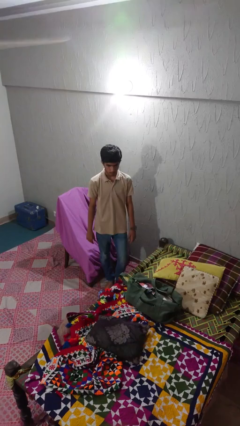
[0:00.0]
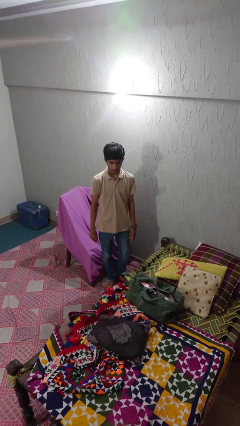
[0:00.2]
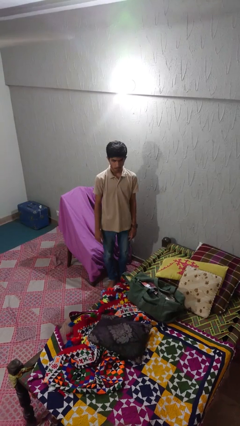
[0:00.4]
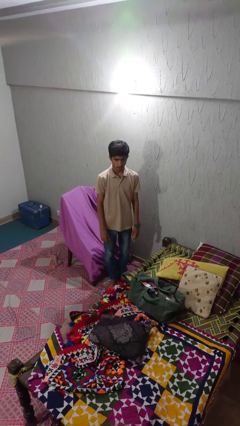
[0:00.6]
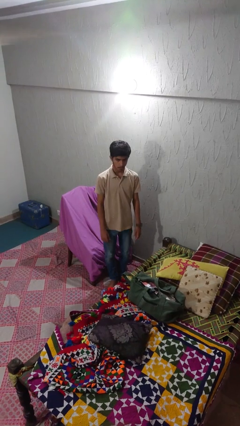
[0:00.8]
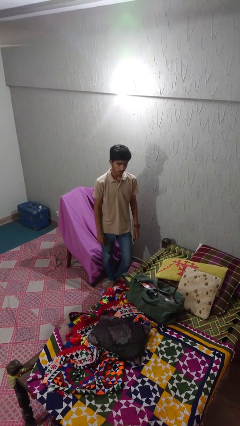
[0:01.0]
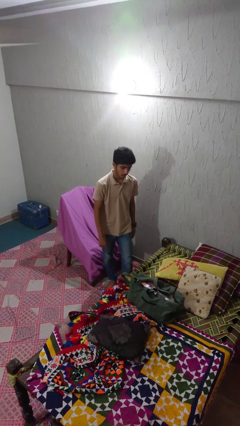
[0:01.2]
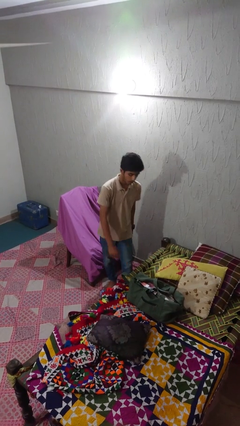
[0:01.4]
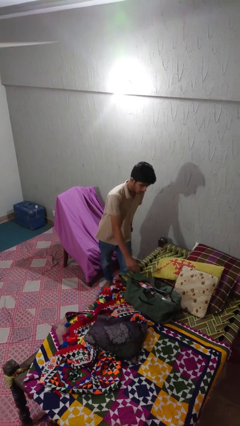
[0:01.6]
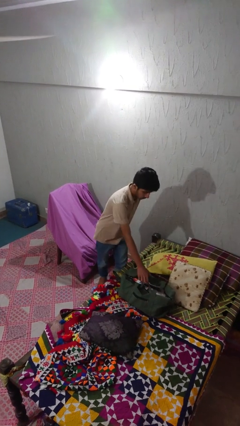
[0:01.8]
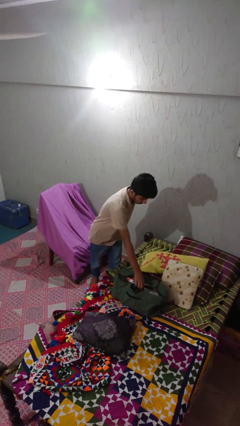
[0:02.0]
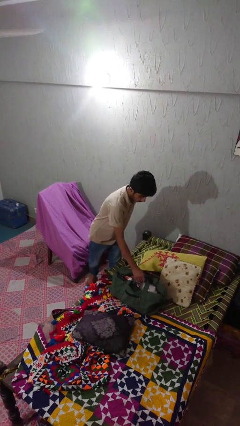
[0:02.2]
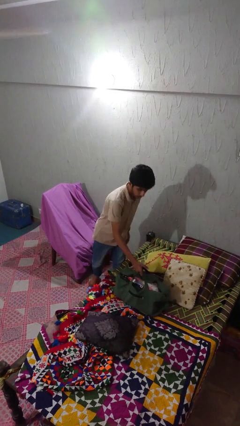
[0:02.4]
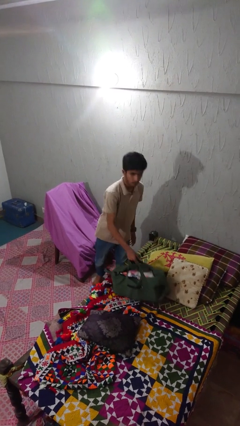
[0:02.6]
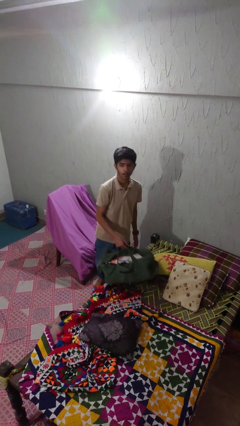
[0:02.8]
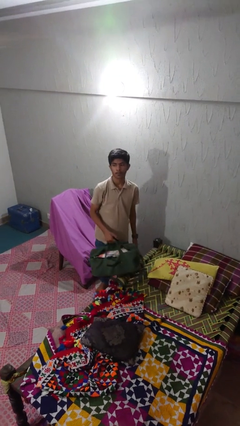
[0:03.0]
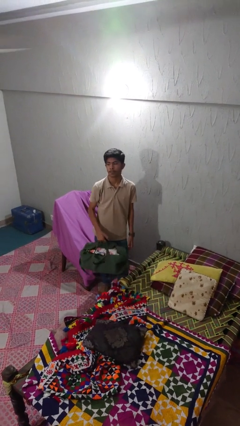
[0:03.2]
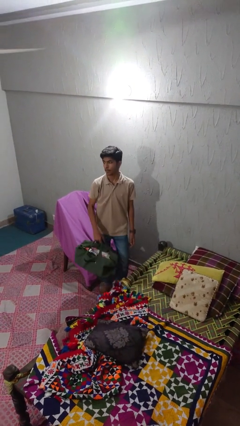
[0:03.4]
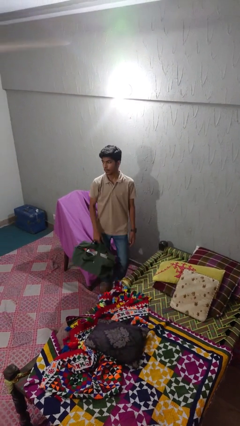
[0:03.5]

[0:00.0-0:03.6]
person picks up object from bed

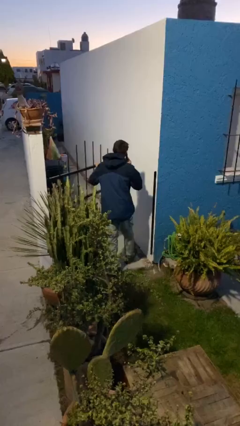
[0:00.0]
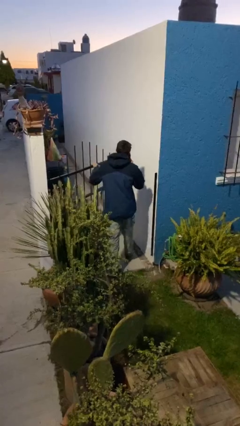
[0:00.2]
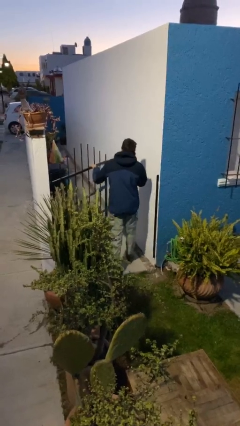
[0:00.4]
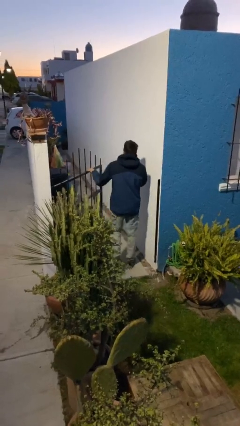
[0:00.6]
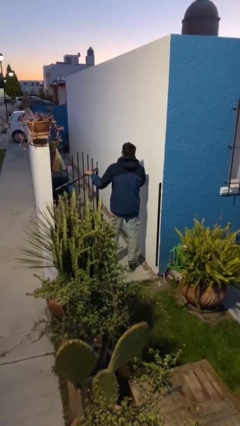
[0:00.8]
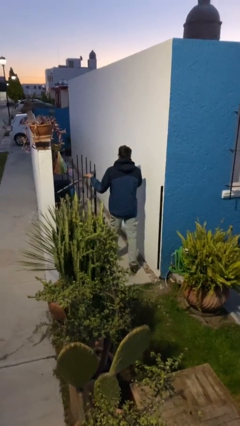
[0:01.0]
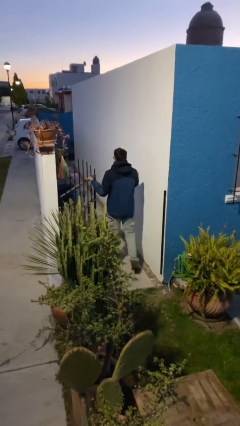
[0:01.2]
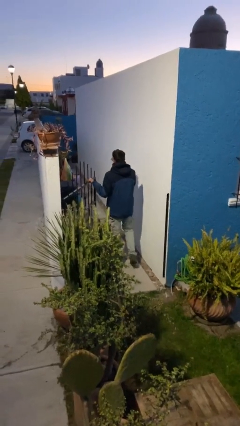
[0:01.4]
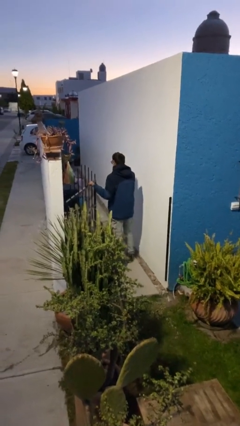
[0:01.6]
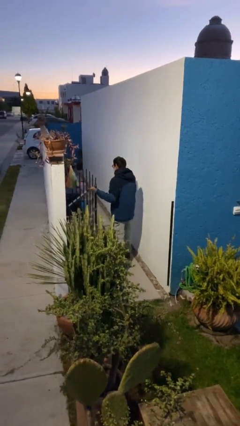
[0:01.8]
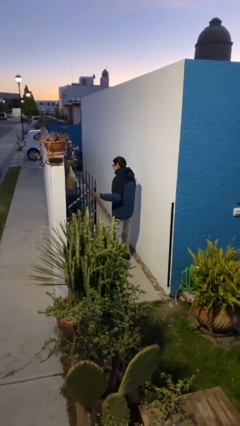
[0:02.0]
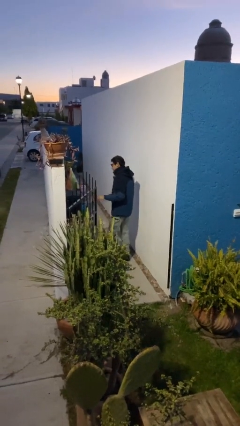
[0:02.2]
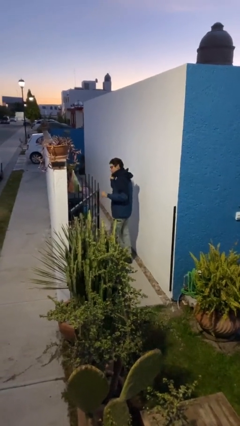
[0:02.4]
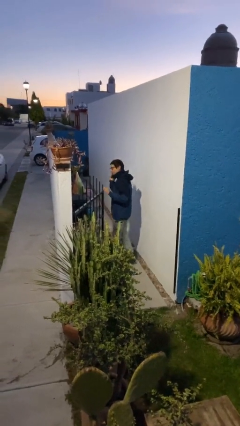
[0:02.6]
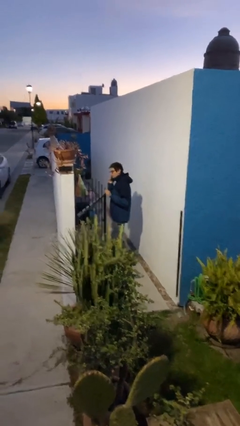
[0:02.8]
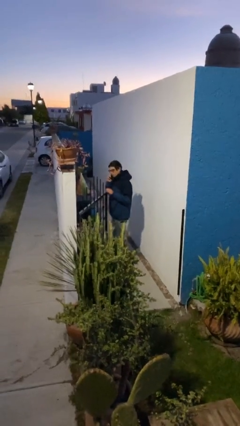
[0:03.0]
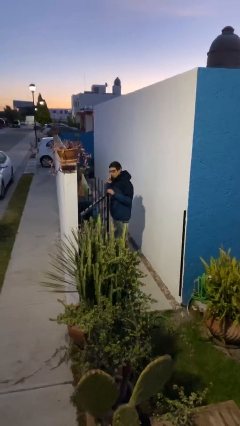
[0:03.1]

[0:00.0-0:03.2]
person exits scene through structure

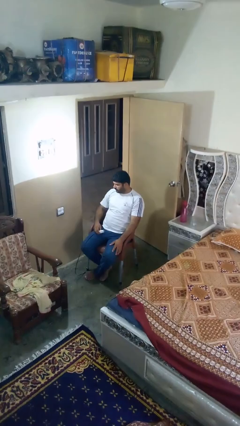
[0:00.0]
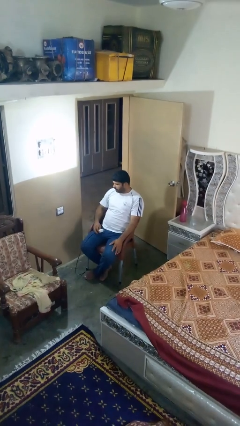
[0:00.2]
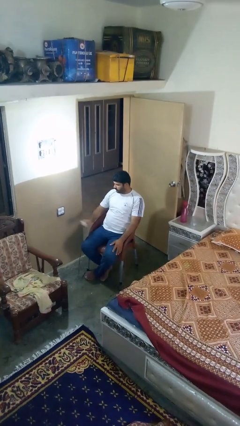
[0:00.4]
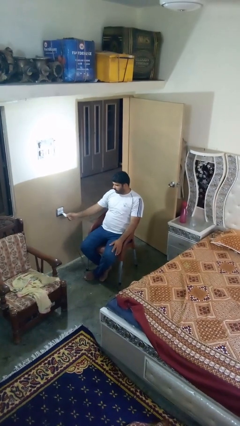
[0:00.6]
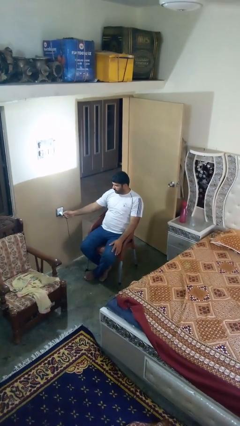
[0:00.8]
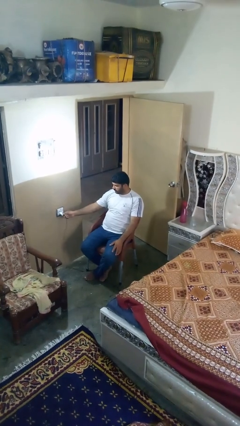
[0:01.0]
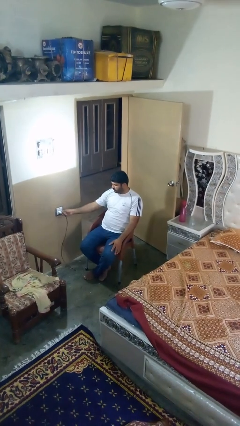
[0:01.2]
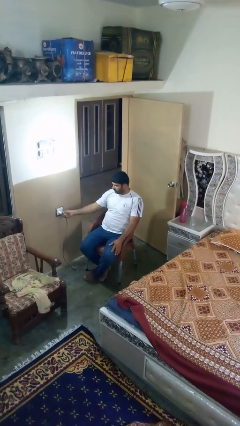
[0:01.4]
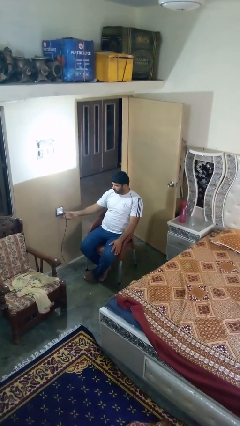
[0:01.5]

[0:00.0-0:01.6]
person plugs into electrical socket

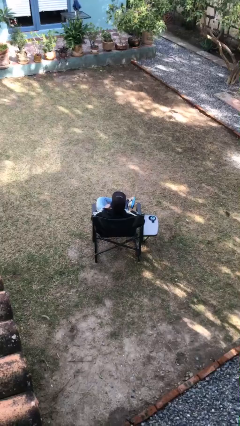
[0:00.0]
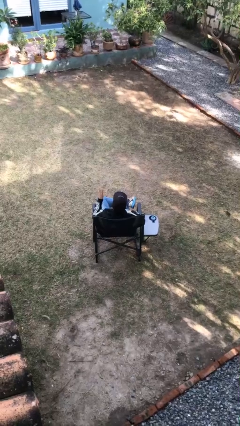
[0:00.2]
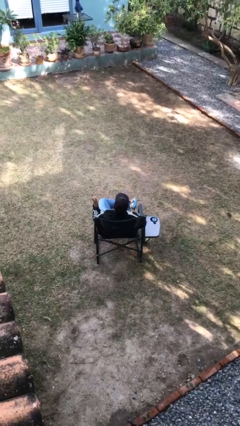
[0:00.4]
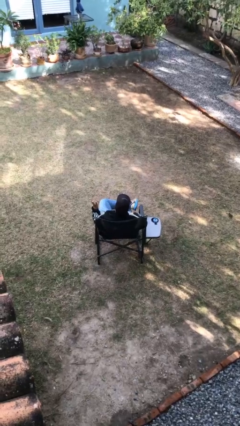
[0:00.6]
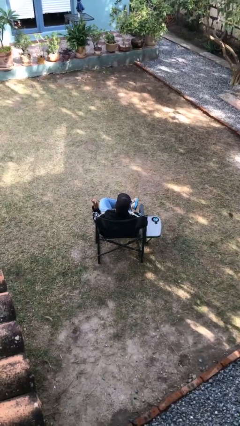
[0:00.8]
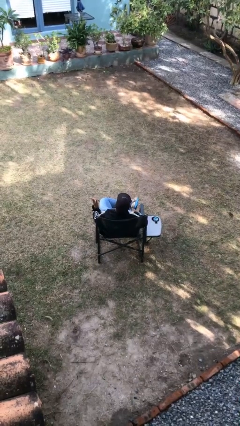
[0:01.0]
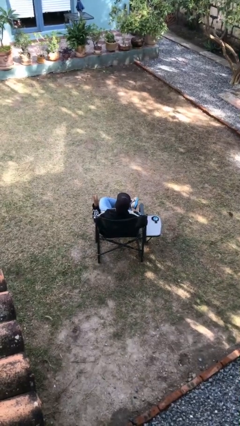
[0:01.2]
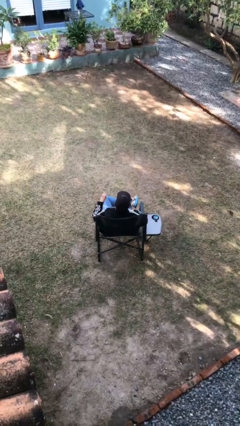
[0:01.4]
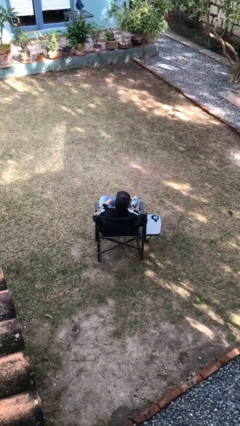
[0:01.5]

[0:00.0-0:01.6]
person gestures number three

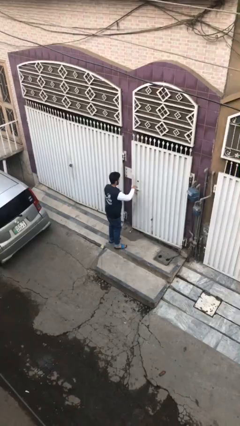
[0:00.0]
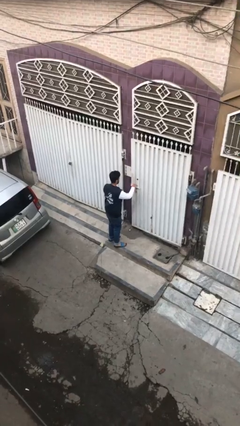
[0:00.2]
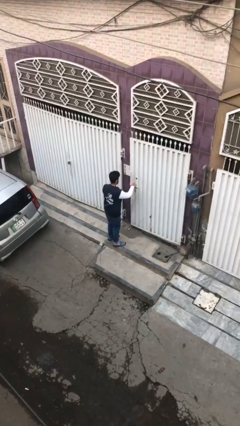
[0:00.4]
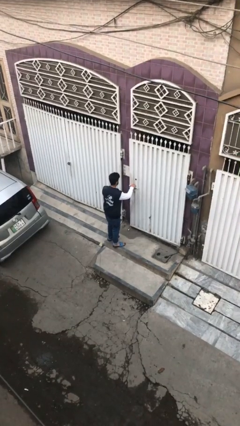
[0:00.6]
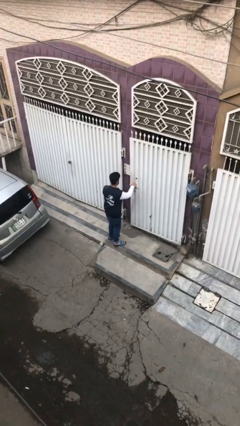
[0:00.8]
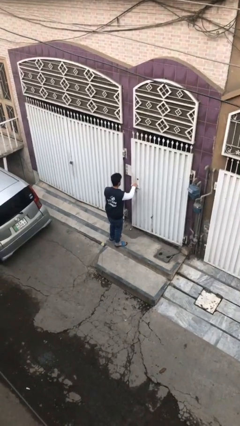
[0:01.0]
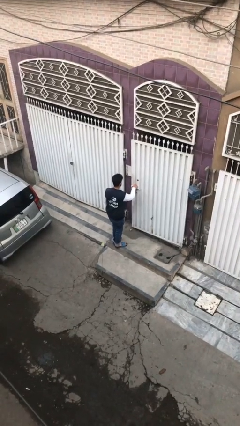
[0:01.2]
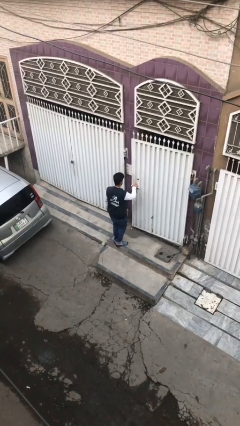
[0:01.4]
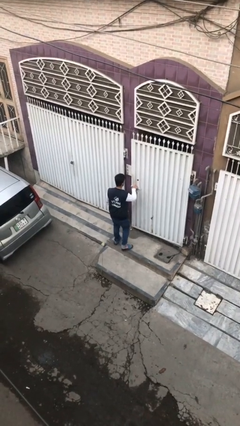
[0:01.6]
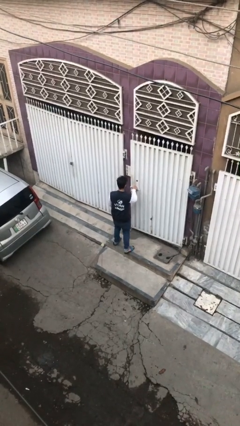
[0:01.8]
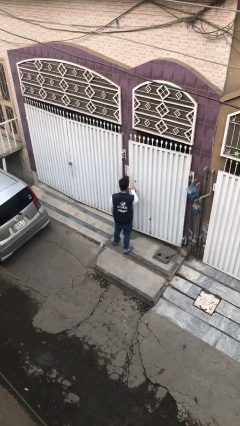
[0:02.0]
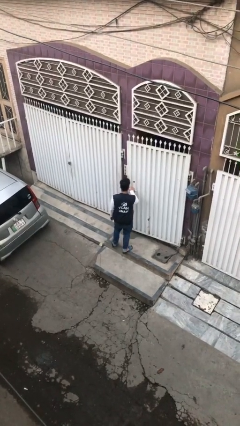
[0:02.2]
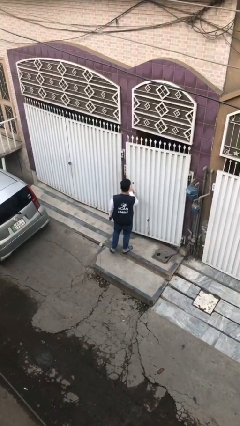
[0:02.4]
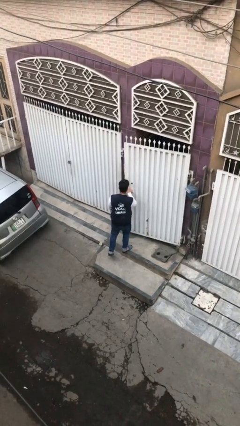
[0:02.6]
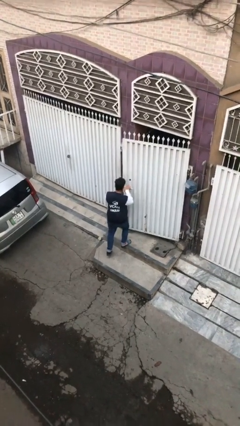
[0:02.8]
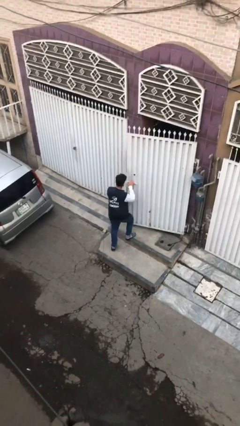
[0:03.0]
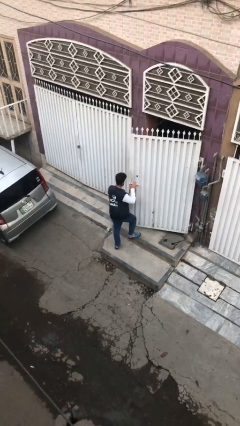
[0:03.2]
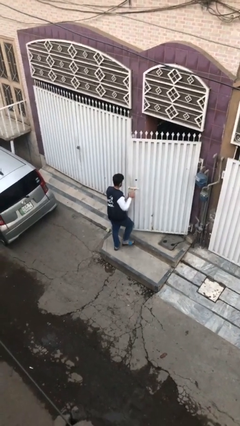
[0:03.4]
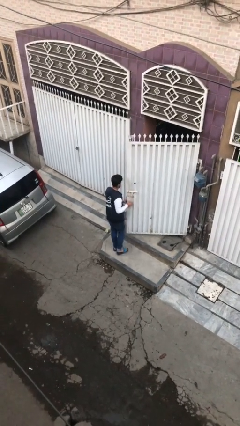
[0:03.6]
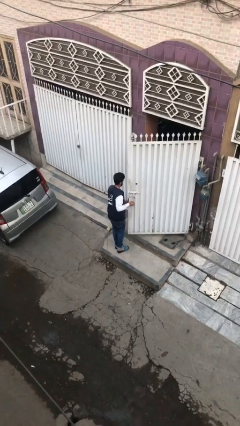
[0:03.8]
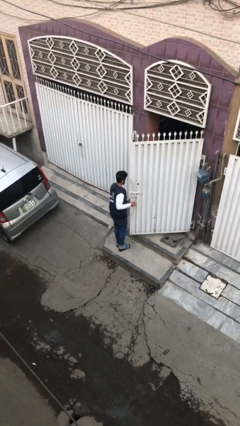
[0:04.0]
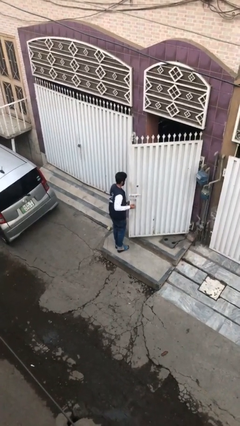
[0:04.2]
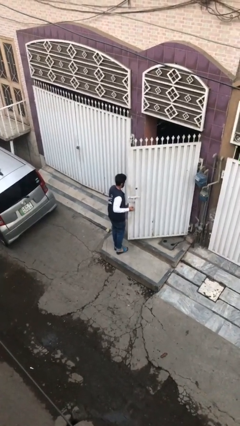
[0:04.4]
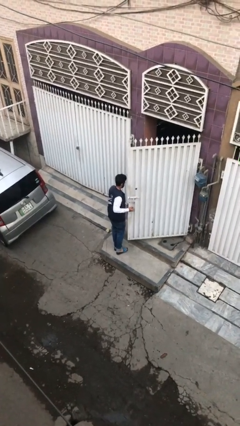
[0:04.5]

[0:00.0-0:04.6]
person opens facility door

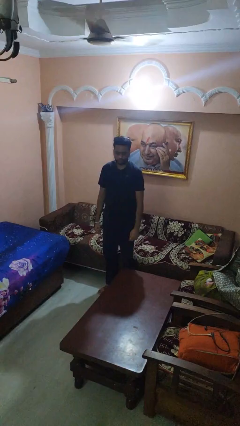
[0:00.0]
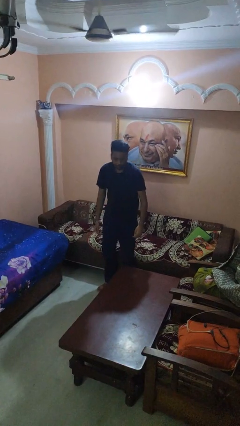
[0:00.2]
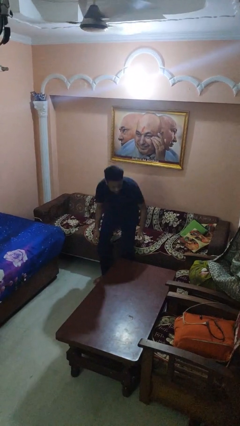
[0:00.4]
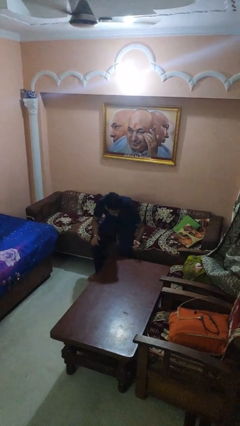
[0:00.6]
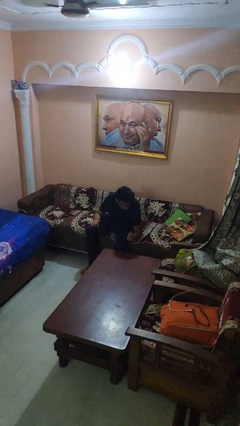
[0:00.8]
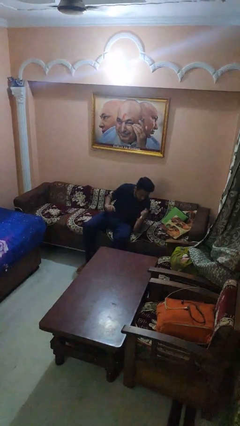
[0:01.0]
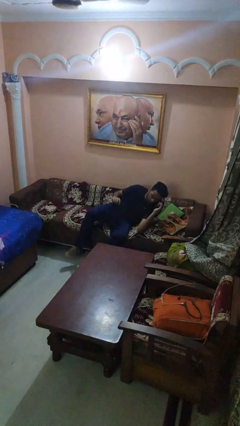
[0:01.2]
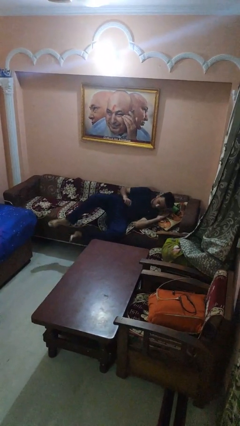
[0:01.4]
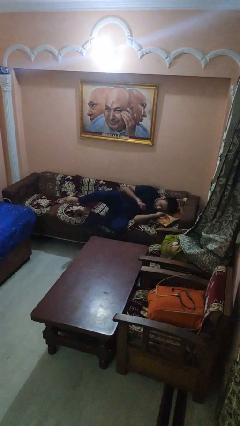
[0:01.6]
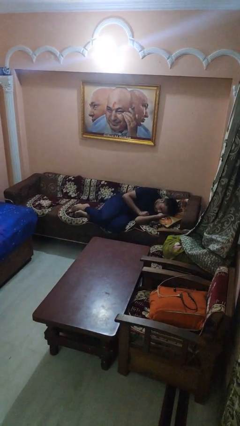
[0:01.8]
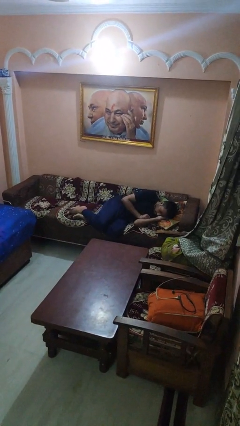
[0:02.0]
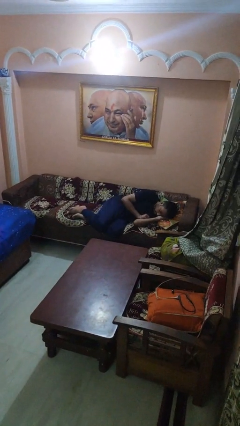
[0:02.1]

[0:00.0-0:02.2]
person lies down on couch

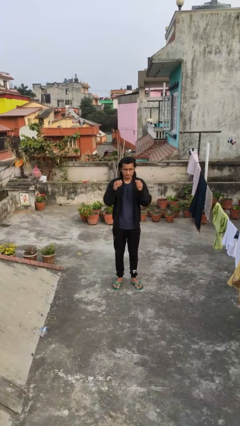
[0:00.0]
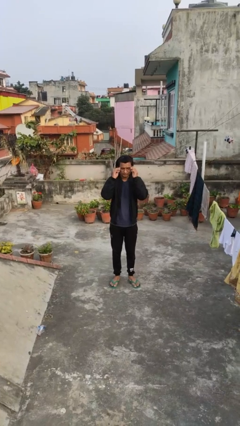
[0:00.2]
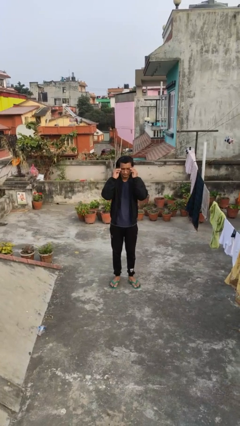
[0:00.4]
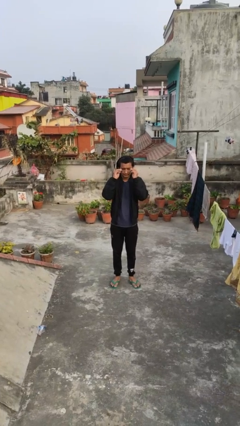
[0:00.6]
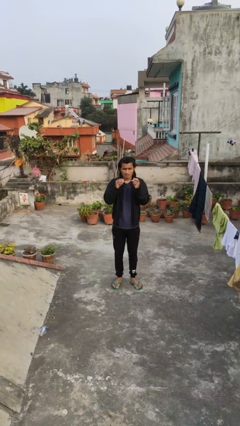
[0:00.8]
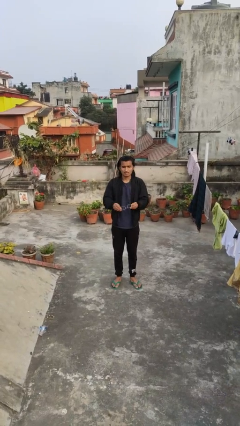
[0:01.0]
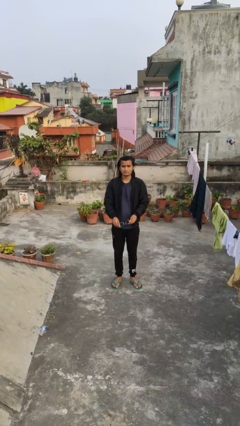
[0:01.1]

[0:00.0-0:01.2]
person takes off glasses
